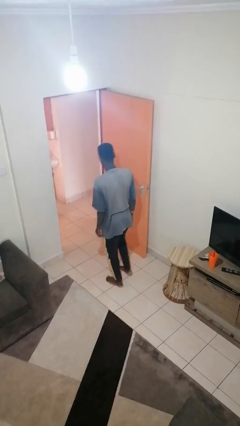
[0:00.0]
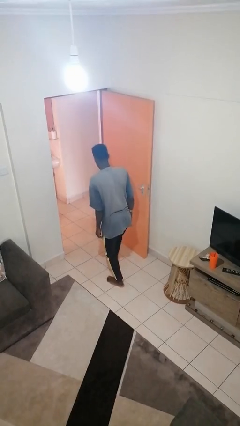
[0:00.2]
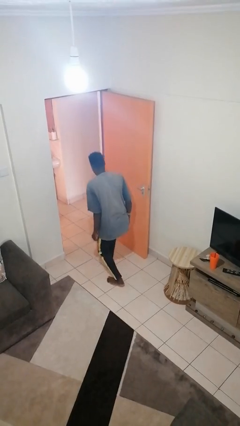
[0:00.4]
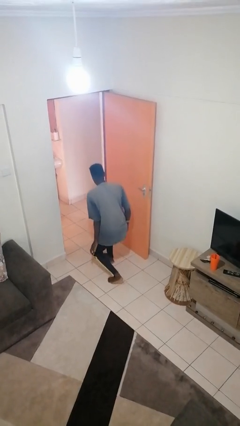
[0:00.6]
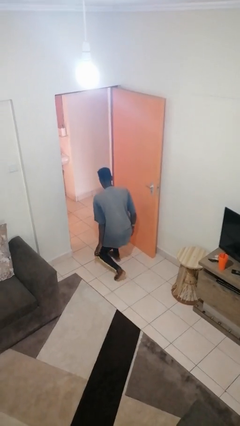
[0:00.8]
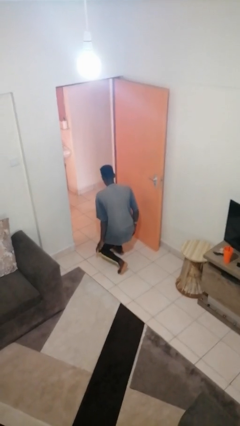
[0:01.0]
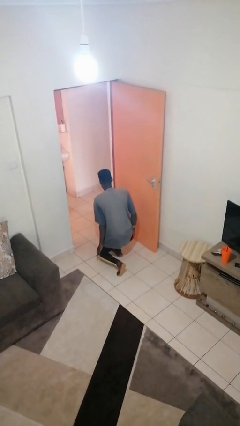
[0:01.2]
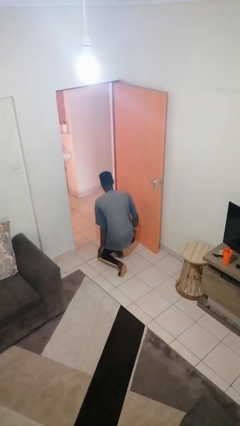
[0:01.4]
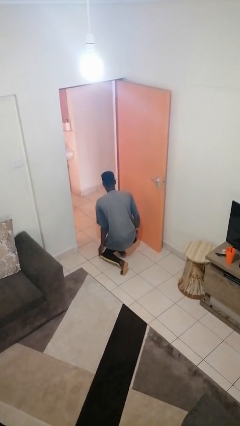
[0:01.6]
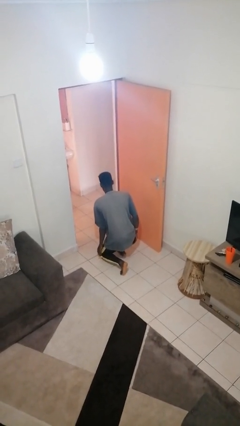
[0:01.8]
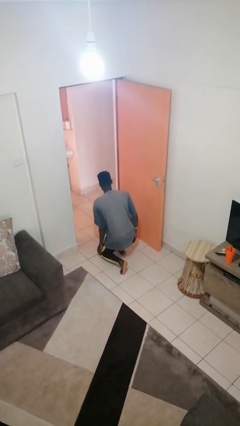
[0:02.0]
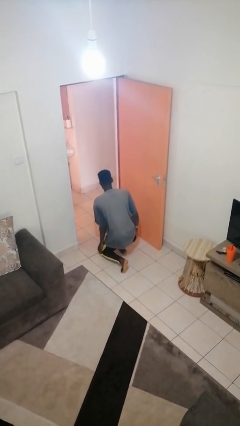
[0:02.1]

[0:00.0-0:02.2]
person kneels

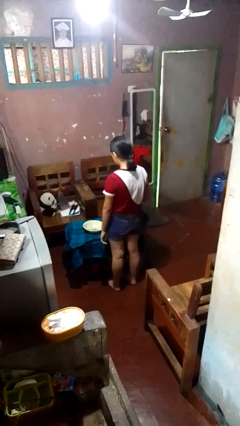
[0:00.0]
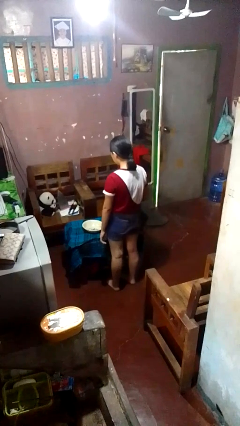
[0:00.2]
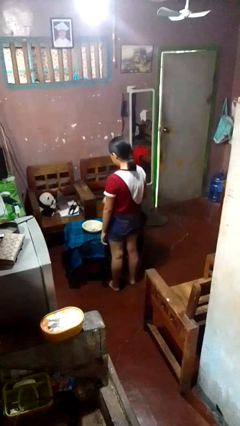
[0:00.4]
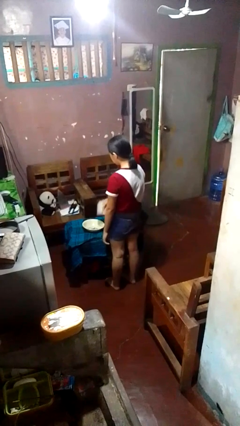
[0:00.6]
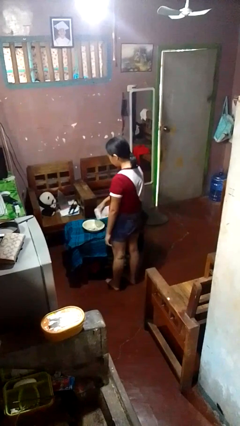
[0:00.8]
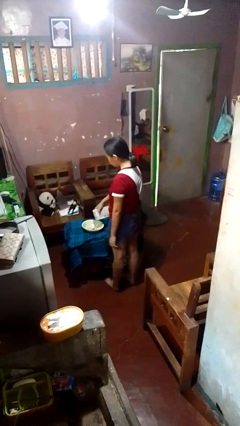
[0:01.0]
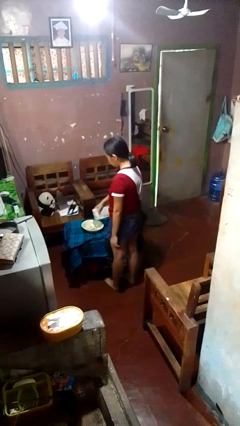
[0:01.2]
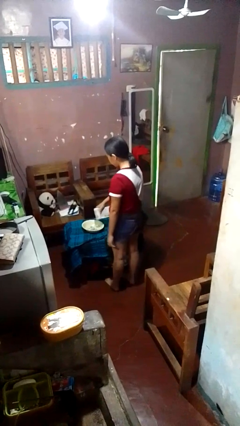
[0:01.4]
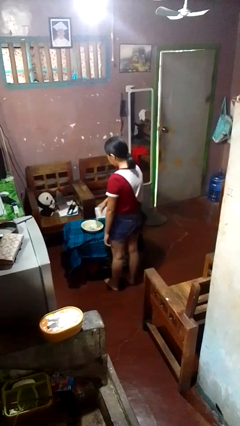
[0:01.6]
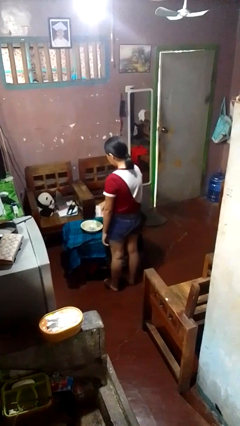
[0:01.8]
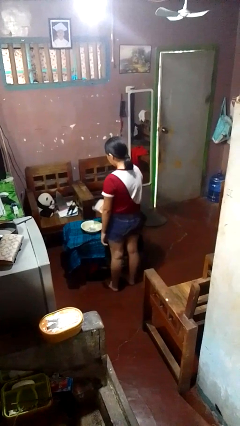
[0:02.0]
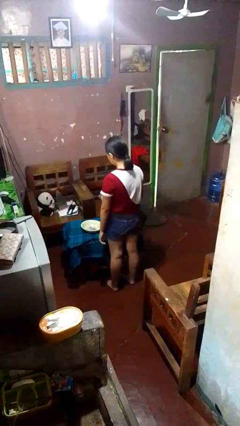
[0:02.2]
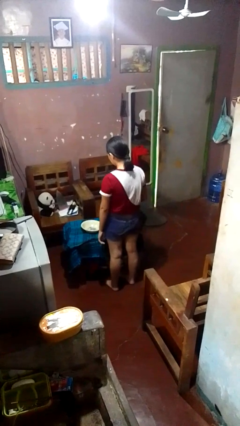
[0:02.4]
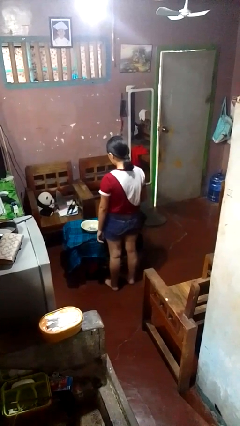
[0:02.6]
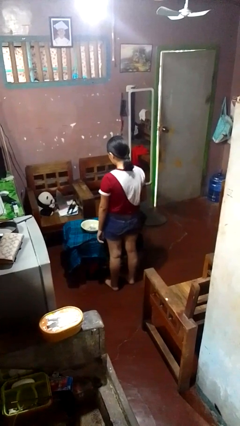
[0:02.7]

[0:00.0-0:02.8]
person pours into bowl

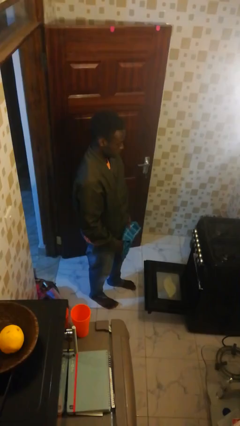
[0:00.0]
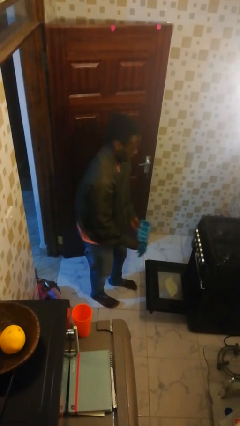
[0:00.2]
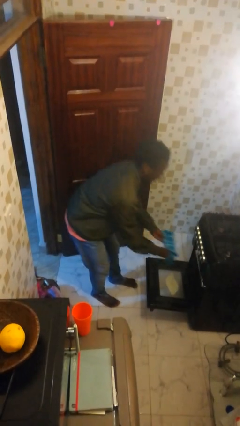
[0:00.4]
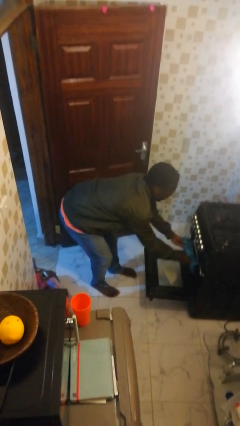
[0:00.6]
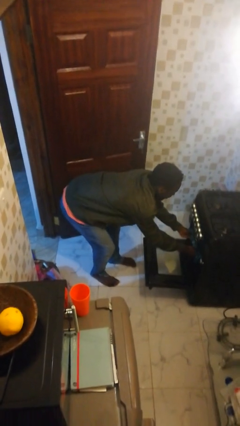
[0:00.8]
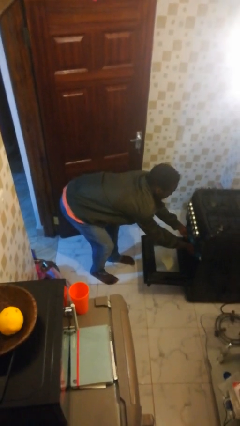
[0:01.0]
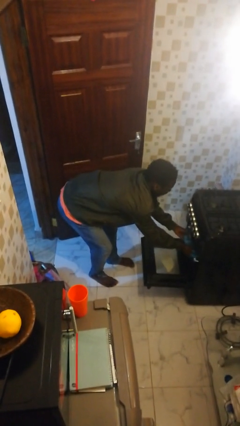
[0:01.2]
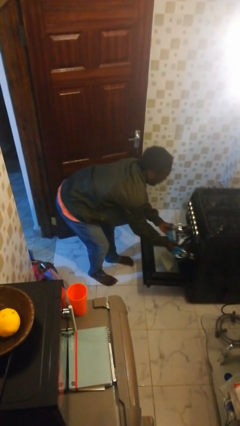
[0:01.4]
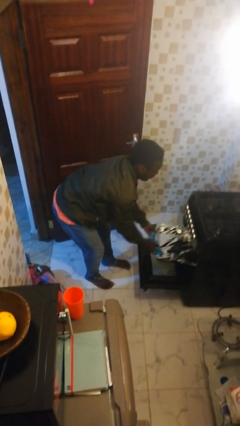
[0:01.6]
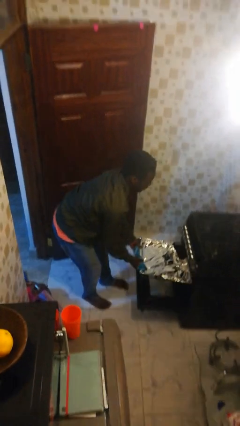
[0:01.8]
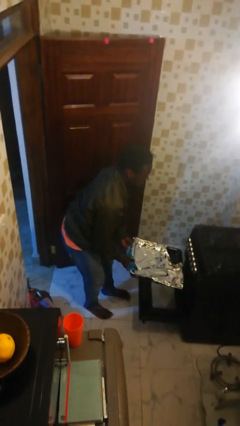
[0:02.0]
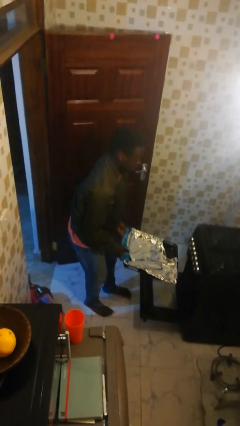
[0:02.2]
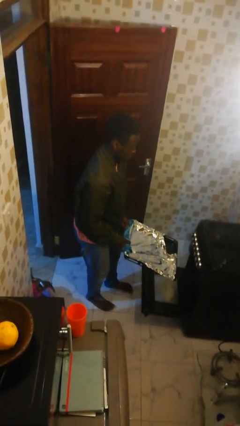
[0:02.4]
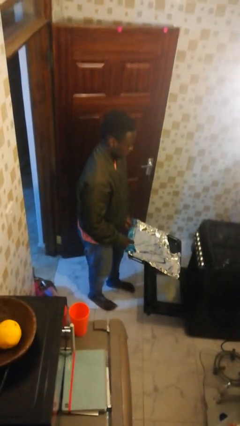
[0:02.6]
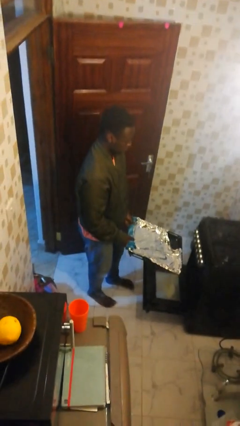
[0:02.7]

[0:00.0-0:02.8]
person takes object from oven

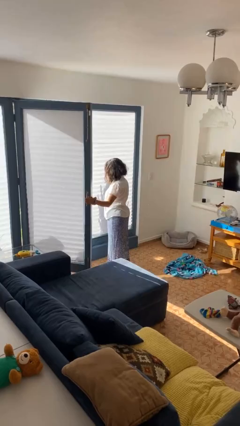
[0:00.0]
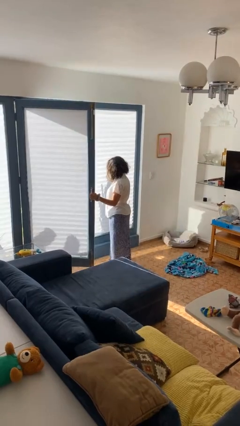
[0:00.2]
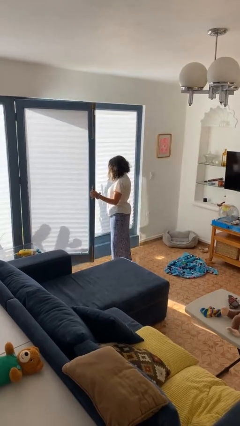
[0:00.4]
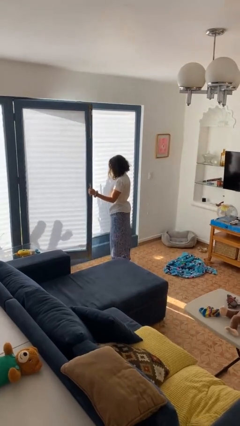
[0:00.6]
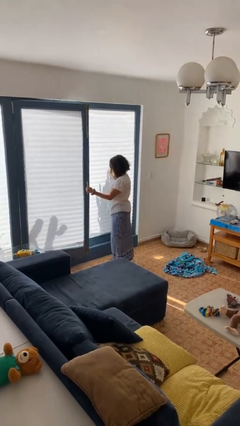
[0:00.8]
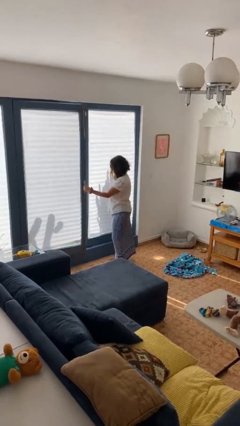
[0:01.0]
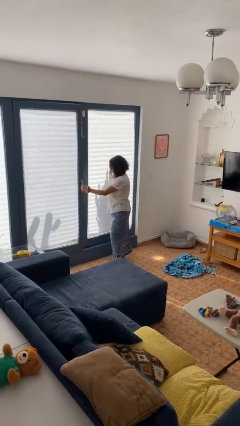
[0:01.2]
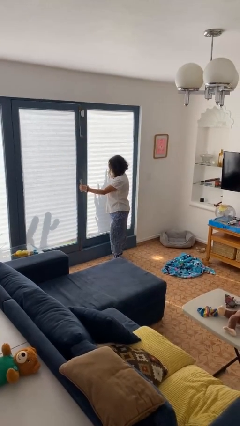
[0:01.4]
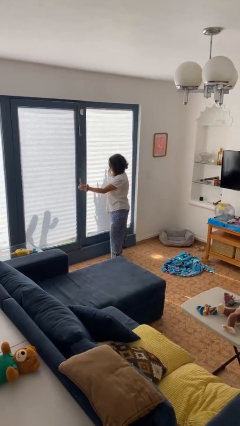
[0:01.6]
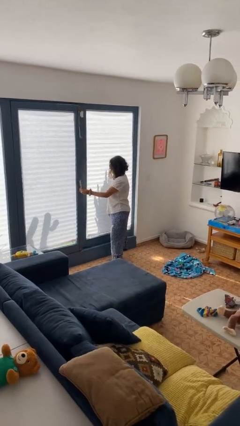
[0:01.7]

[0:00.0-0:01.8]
person closes home window

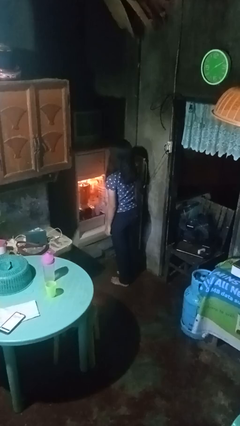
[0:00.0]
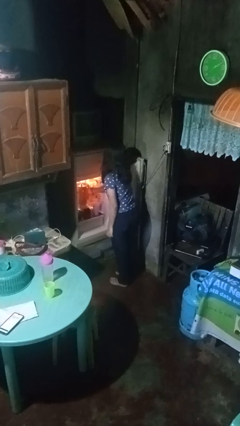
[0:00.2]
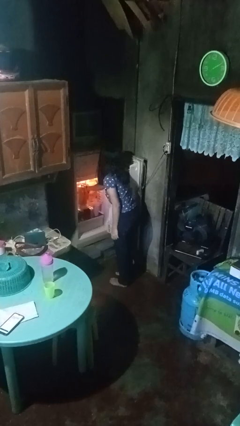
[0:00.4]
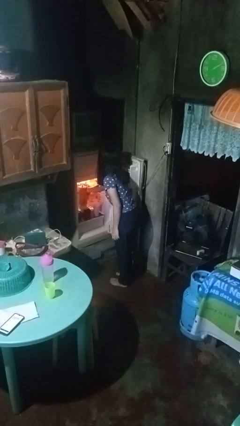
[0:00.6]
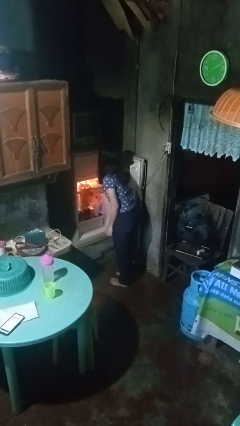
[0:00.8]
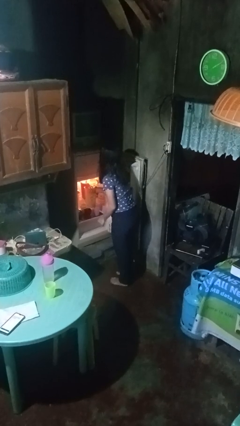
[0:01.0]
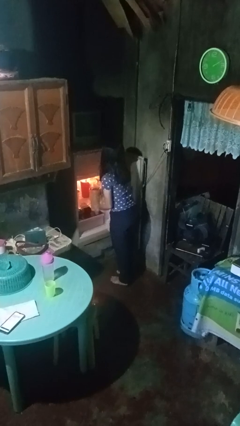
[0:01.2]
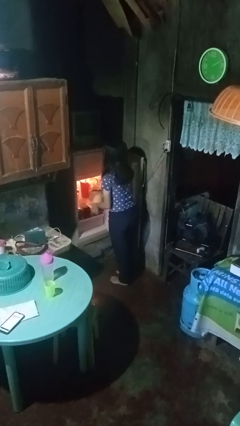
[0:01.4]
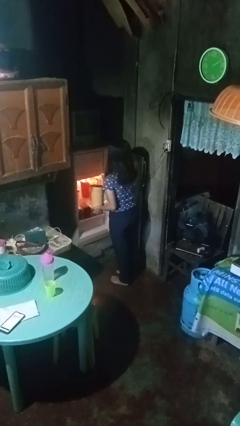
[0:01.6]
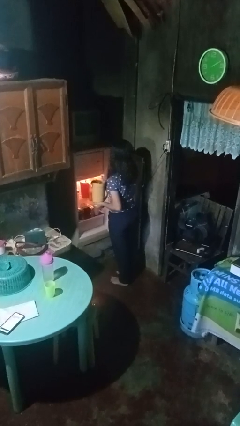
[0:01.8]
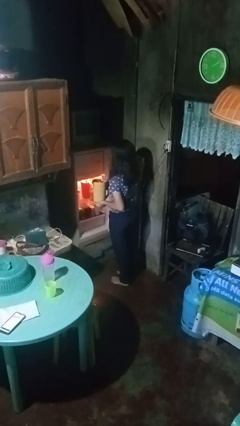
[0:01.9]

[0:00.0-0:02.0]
person takes object from refrigerator

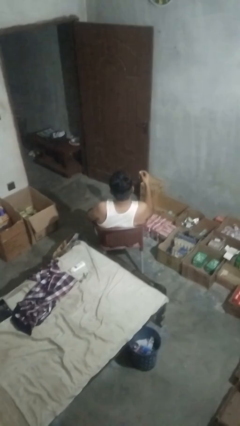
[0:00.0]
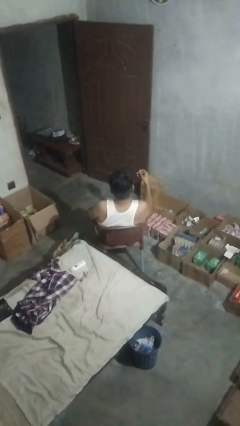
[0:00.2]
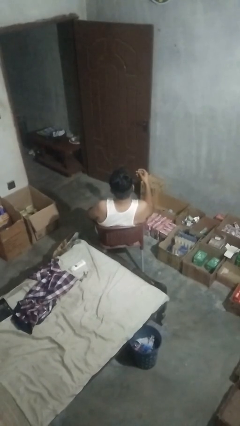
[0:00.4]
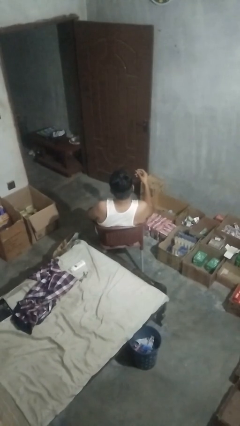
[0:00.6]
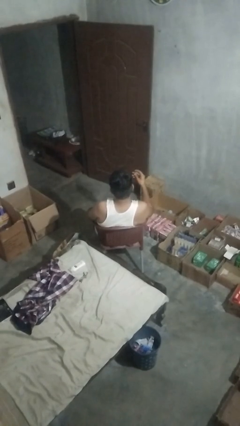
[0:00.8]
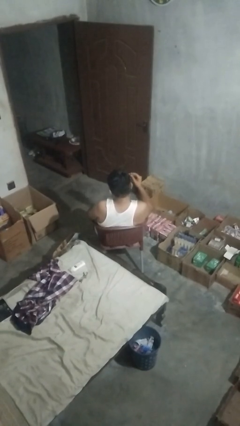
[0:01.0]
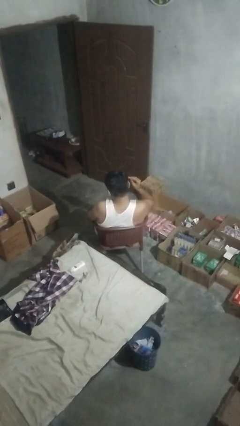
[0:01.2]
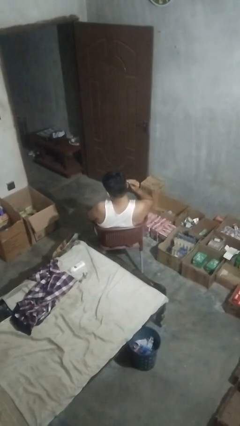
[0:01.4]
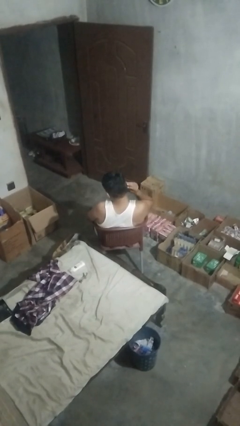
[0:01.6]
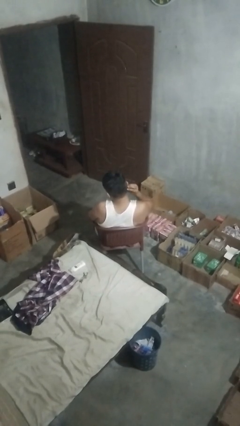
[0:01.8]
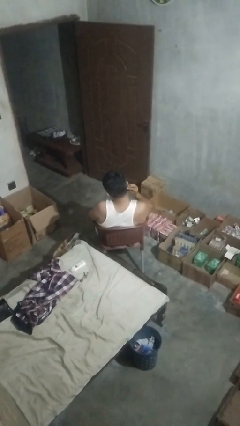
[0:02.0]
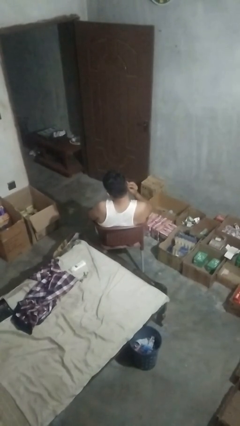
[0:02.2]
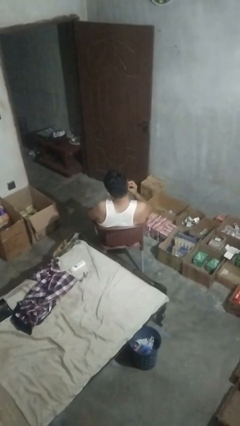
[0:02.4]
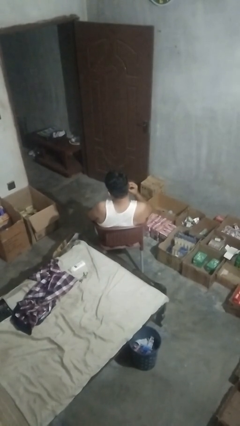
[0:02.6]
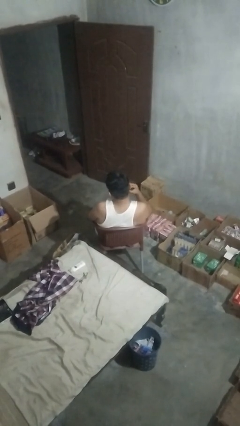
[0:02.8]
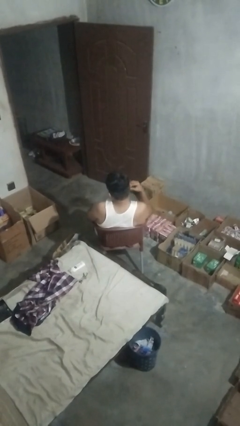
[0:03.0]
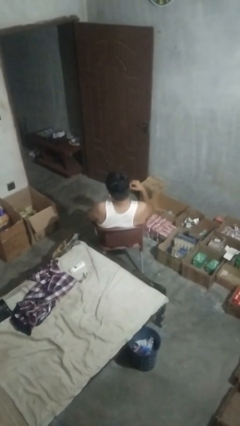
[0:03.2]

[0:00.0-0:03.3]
person puts on earrings

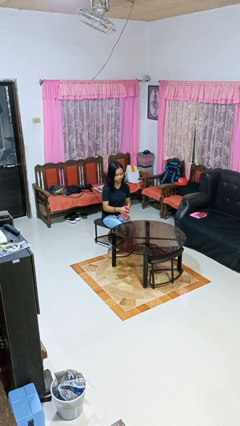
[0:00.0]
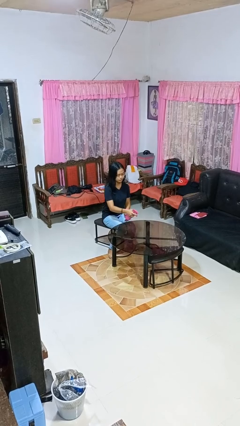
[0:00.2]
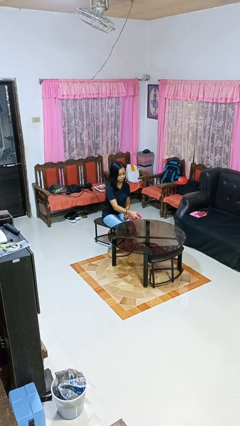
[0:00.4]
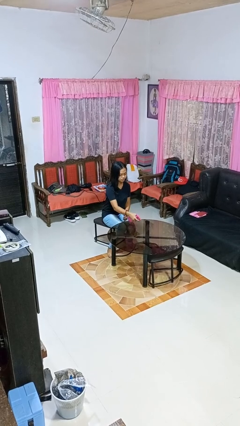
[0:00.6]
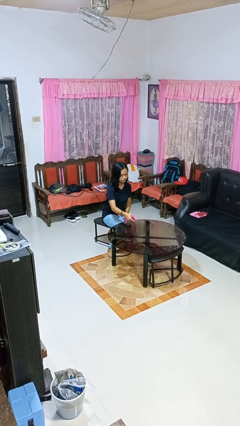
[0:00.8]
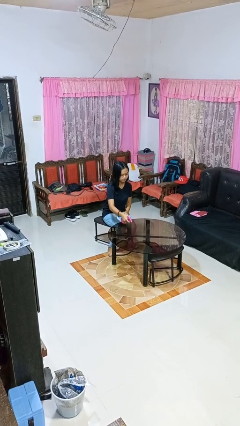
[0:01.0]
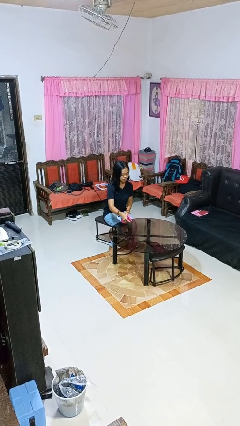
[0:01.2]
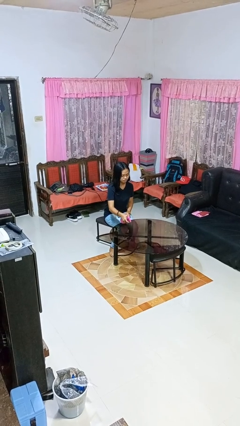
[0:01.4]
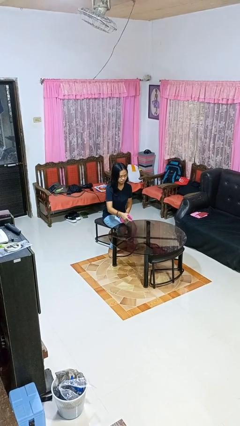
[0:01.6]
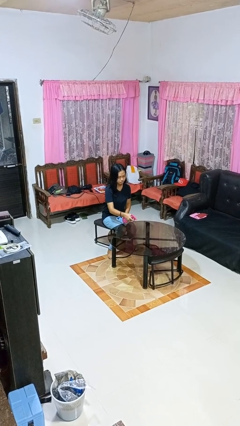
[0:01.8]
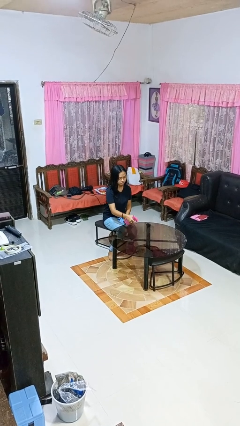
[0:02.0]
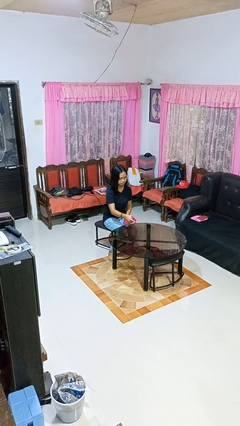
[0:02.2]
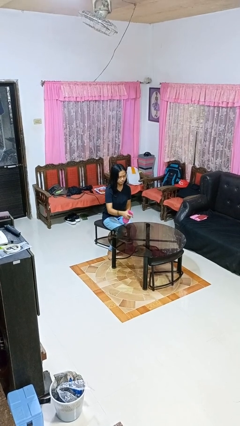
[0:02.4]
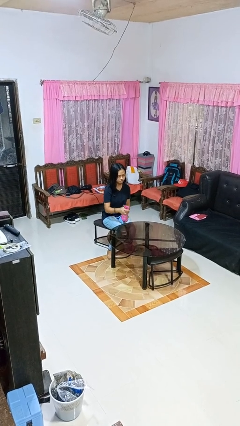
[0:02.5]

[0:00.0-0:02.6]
person sprays from bottle
